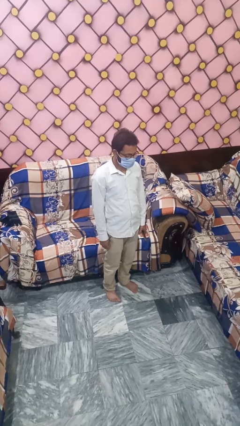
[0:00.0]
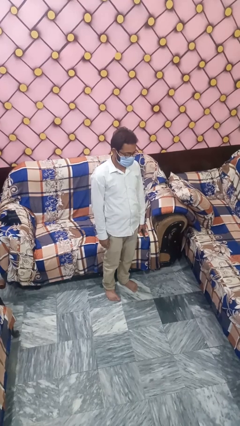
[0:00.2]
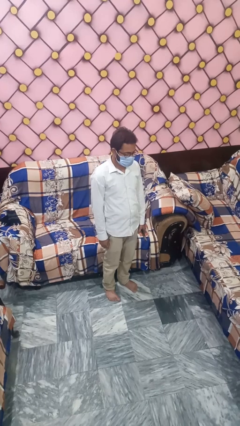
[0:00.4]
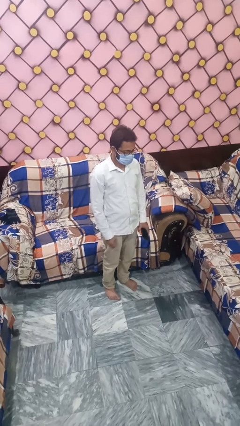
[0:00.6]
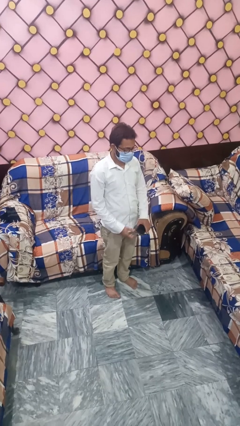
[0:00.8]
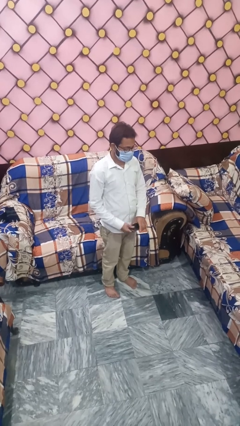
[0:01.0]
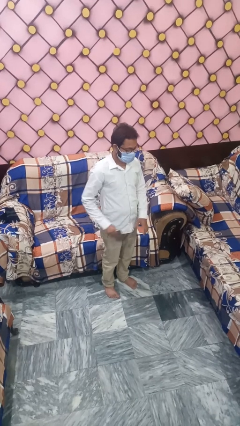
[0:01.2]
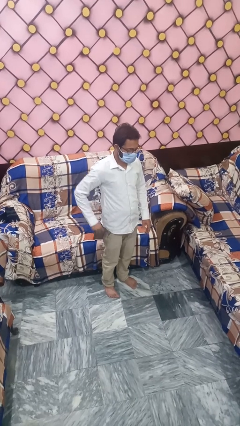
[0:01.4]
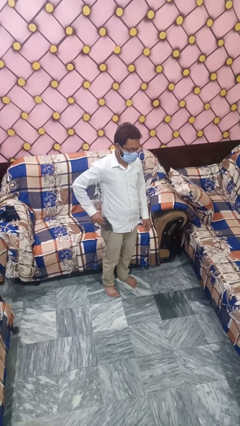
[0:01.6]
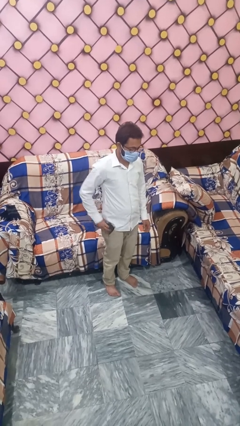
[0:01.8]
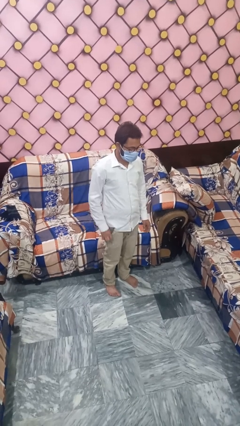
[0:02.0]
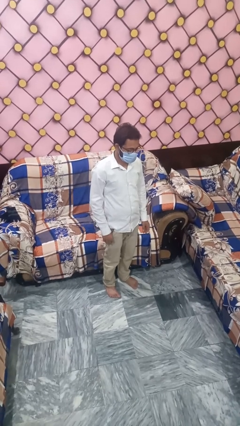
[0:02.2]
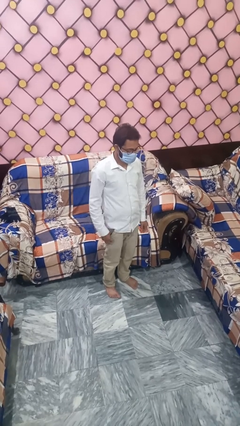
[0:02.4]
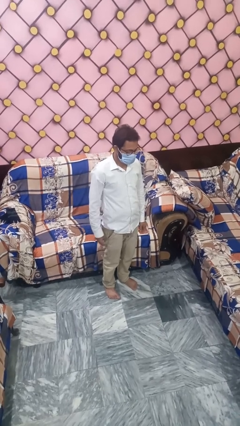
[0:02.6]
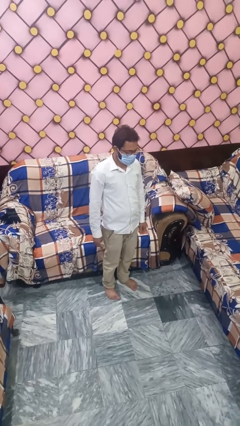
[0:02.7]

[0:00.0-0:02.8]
person takes phone from pocket

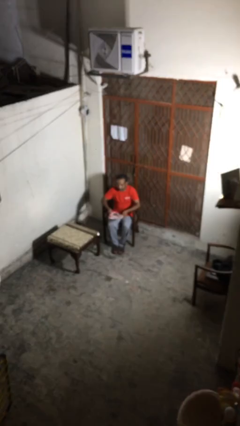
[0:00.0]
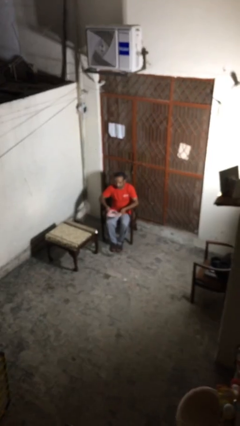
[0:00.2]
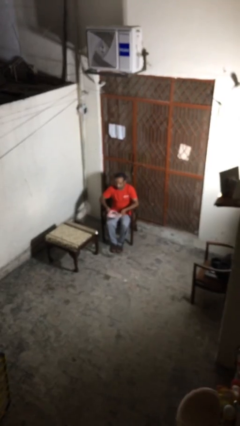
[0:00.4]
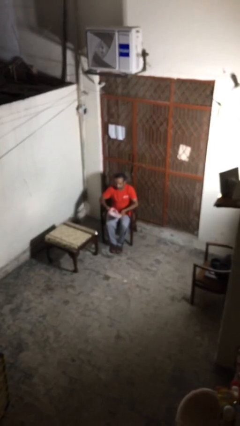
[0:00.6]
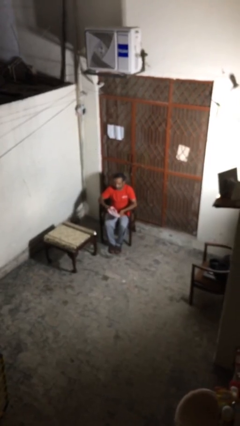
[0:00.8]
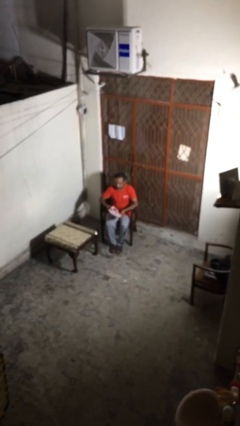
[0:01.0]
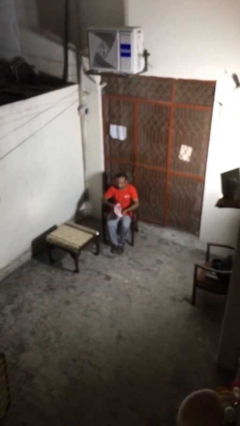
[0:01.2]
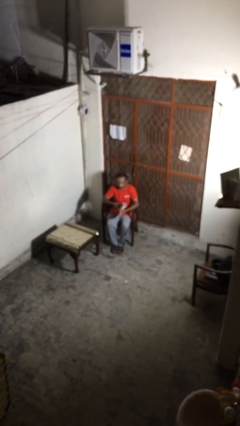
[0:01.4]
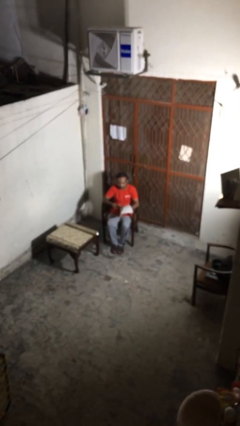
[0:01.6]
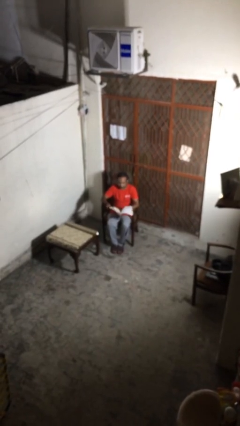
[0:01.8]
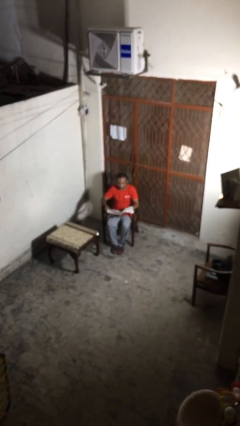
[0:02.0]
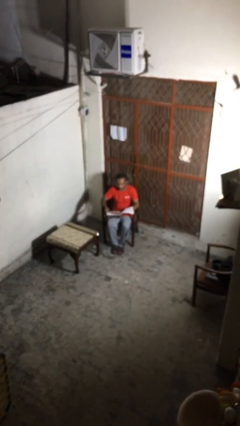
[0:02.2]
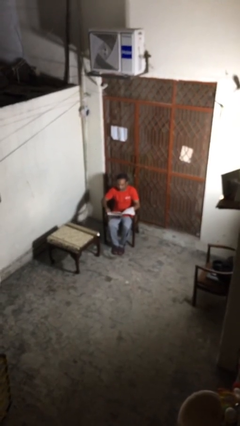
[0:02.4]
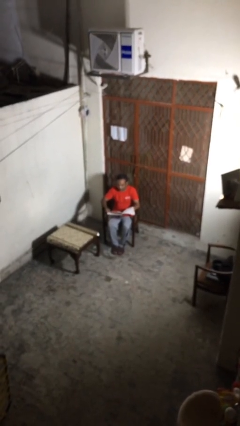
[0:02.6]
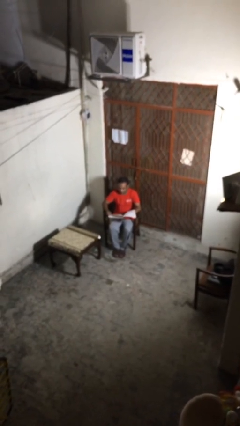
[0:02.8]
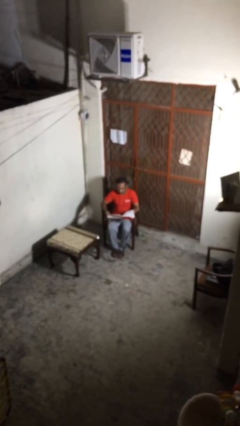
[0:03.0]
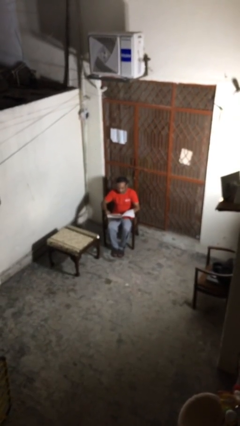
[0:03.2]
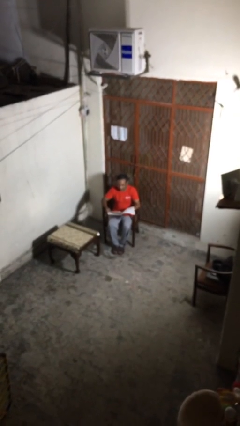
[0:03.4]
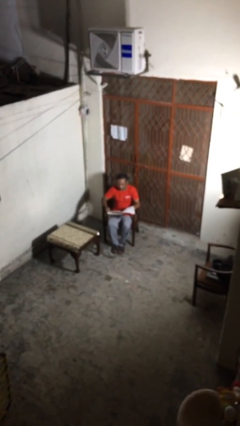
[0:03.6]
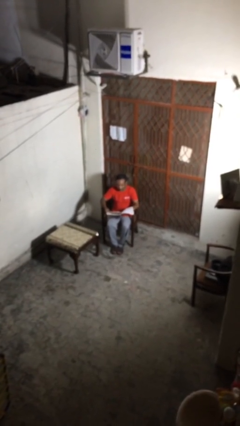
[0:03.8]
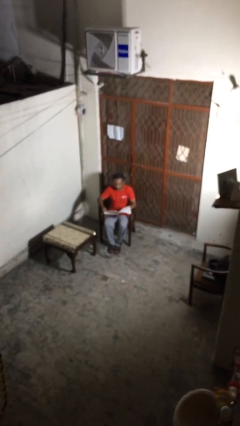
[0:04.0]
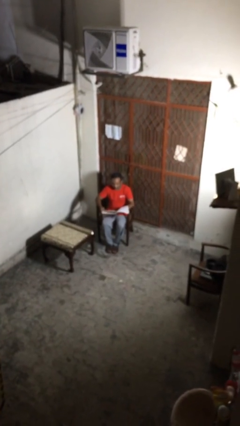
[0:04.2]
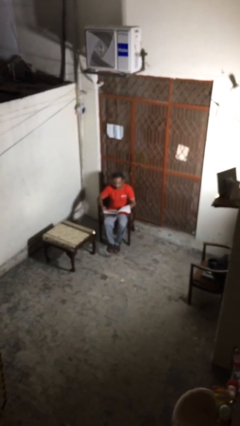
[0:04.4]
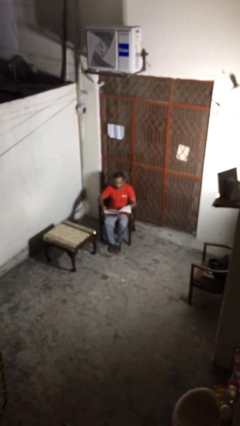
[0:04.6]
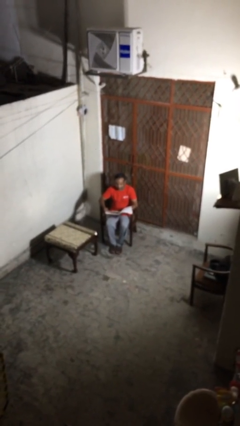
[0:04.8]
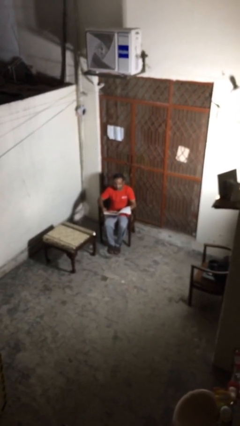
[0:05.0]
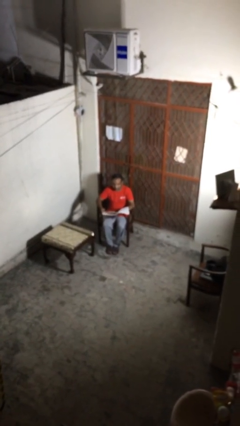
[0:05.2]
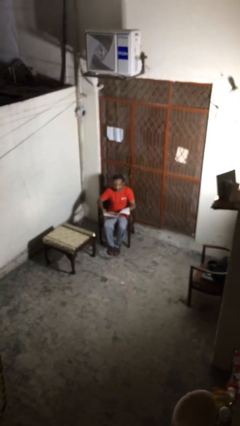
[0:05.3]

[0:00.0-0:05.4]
person reads document

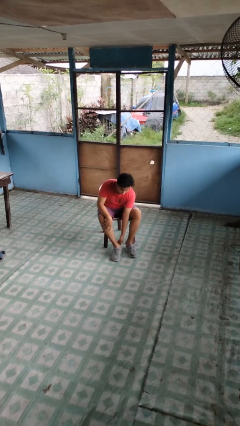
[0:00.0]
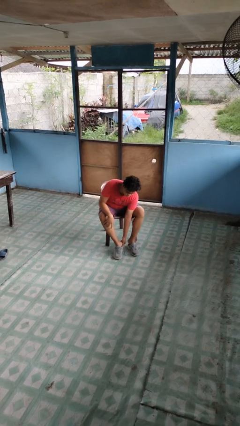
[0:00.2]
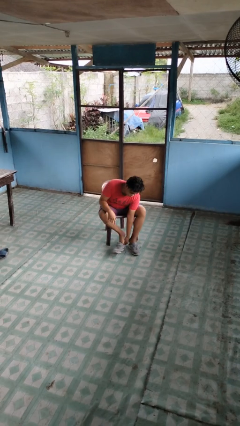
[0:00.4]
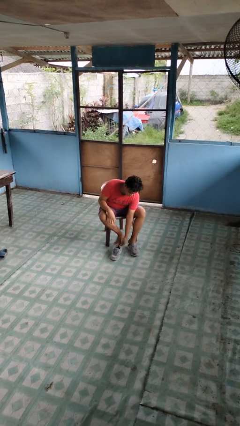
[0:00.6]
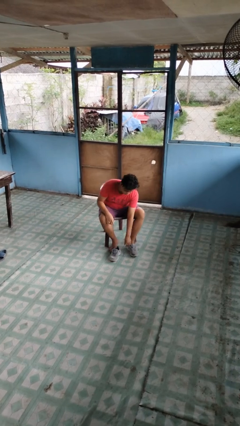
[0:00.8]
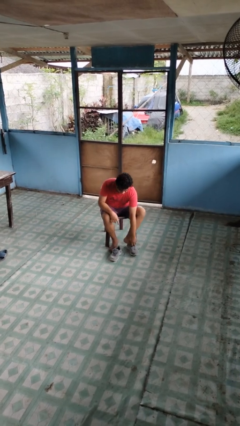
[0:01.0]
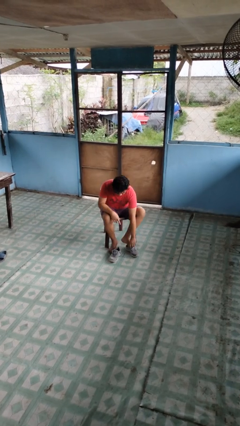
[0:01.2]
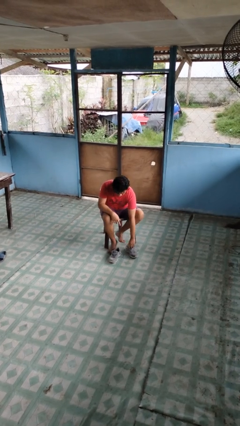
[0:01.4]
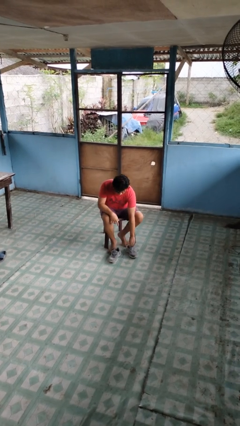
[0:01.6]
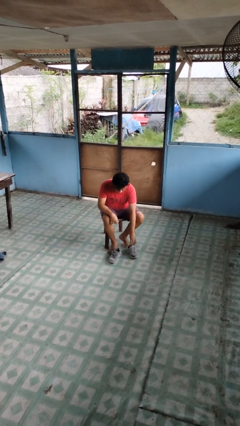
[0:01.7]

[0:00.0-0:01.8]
person takes off shoes

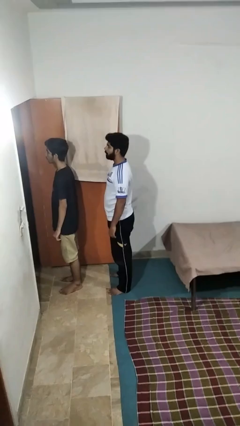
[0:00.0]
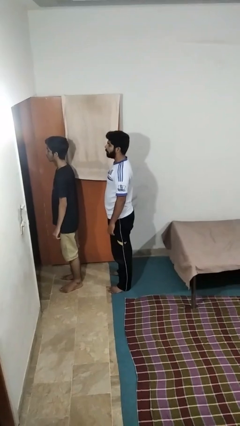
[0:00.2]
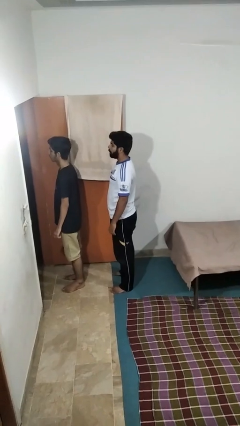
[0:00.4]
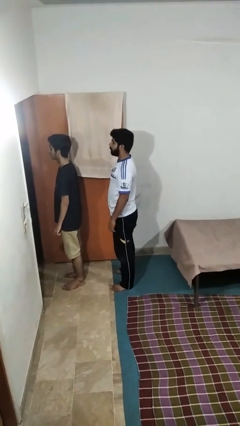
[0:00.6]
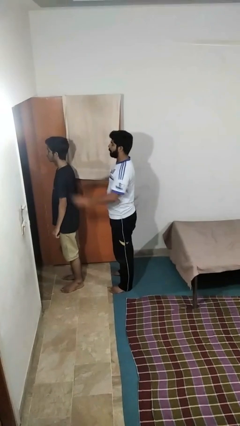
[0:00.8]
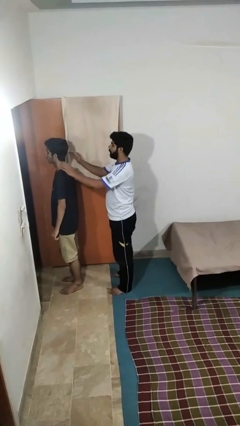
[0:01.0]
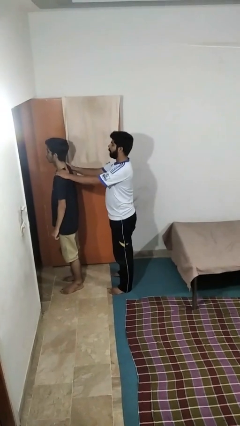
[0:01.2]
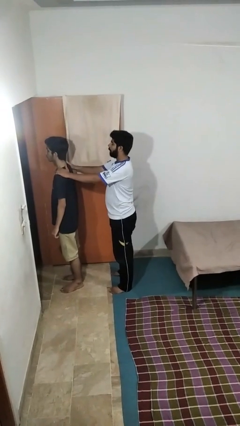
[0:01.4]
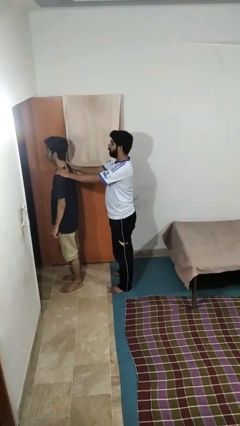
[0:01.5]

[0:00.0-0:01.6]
person grabs person by shoulder

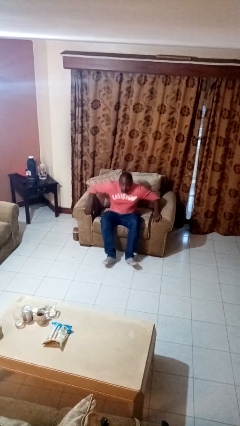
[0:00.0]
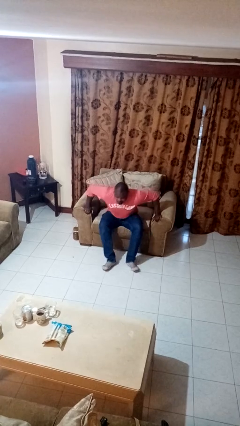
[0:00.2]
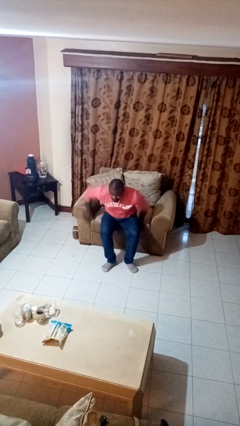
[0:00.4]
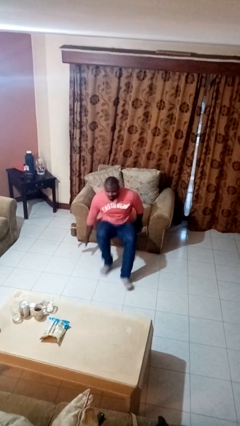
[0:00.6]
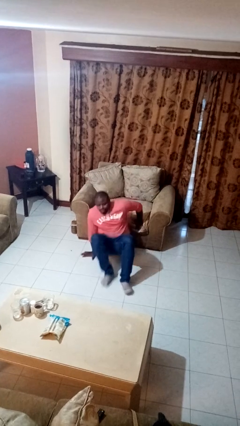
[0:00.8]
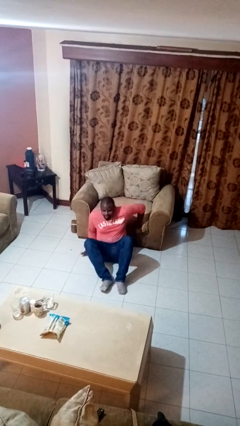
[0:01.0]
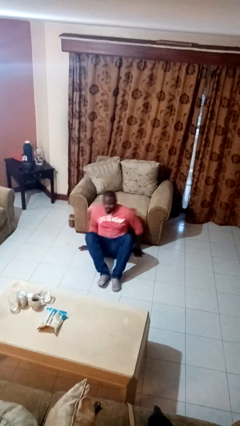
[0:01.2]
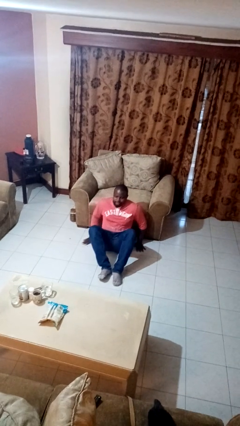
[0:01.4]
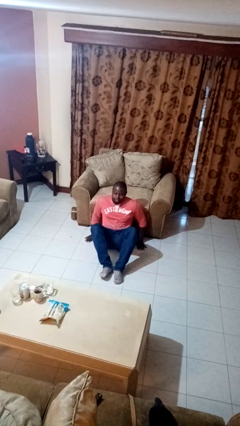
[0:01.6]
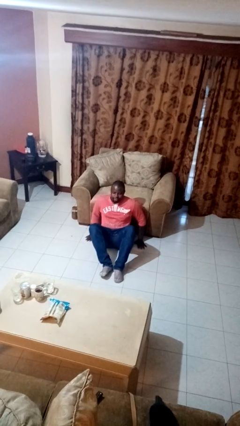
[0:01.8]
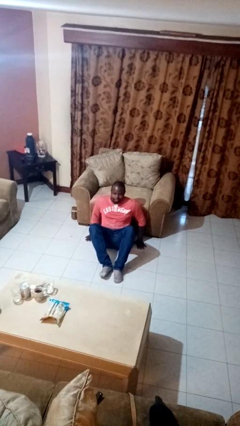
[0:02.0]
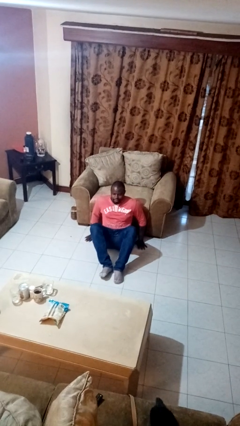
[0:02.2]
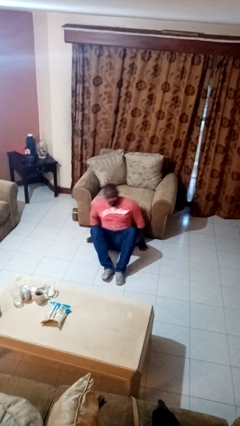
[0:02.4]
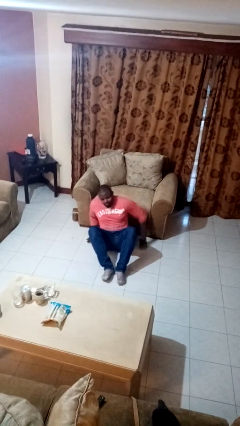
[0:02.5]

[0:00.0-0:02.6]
person falls from chair

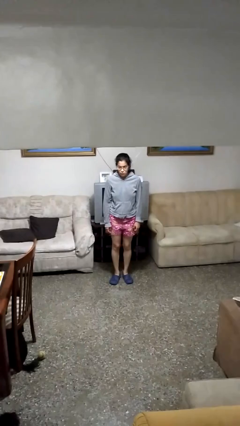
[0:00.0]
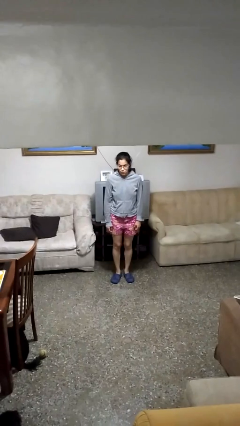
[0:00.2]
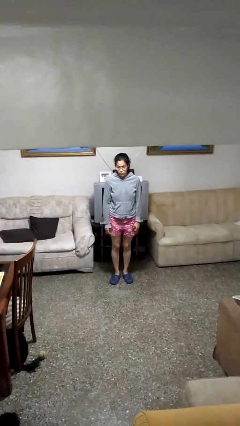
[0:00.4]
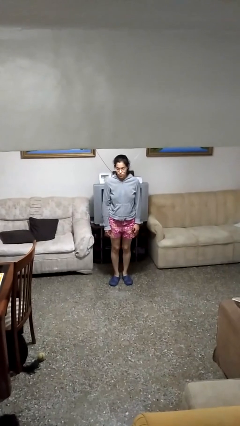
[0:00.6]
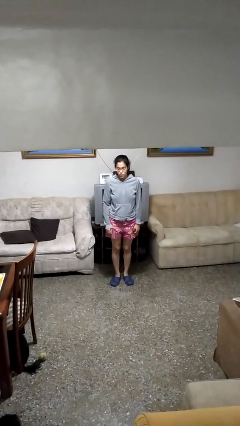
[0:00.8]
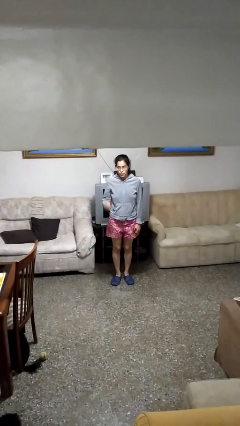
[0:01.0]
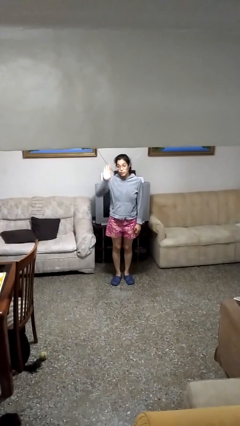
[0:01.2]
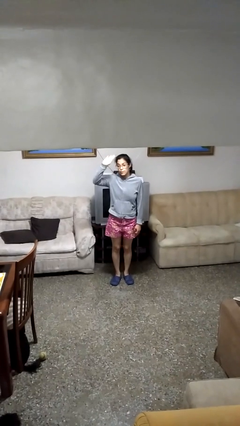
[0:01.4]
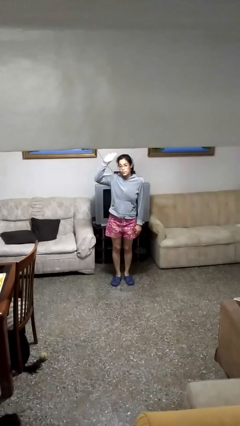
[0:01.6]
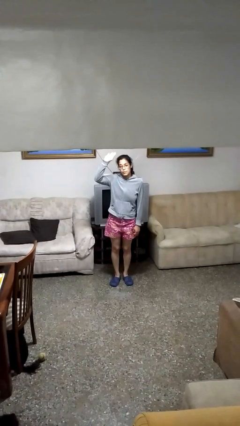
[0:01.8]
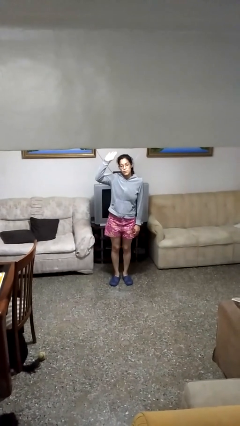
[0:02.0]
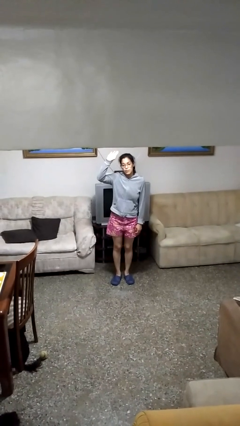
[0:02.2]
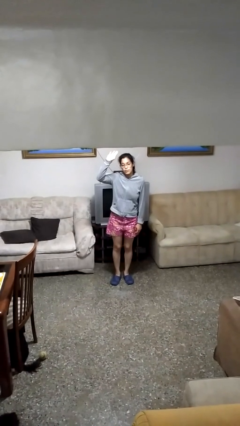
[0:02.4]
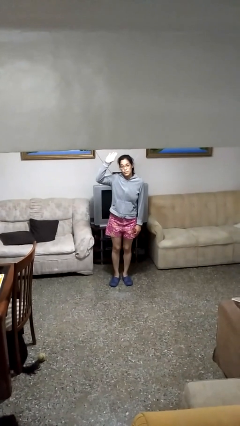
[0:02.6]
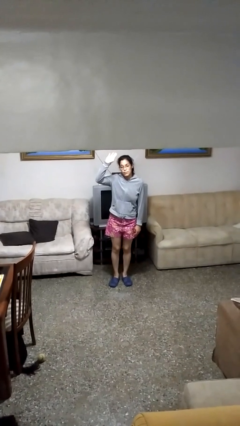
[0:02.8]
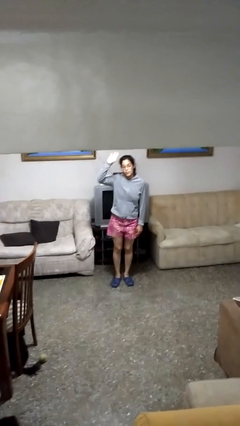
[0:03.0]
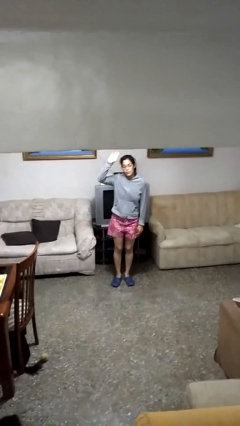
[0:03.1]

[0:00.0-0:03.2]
person gestures raise hand

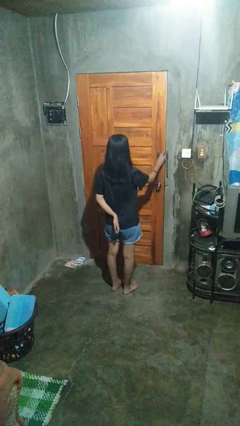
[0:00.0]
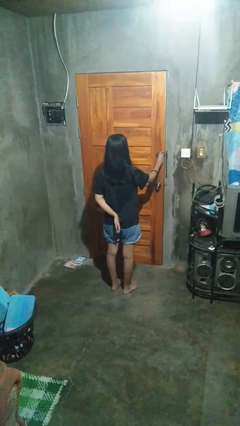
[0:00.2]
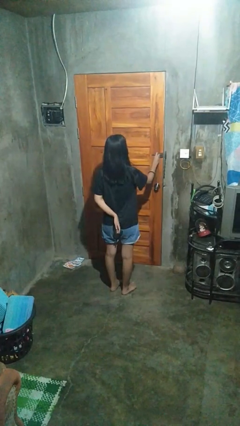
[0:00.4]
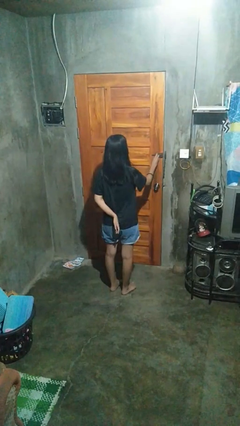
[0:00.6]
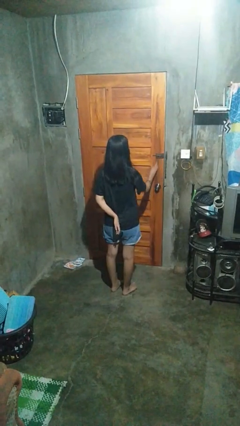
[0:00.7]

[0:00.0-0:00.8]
person unlocks door with keys
